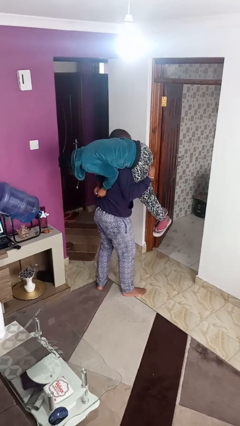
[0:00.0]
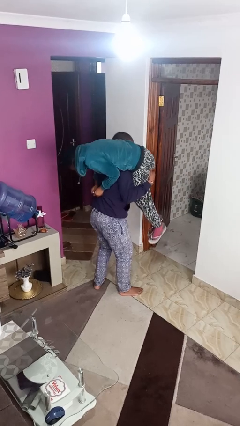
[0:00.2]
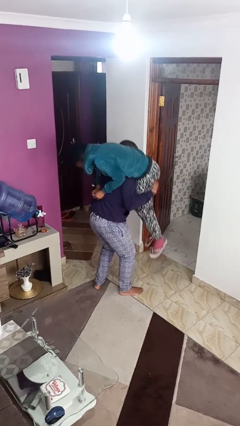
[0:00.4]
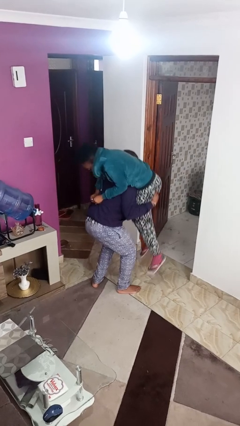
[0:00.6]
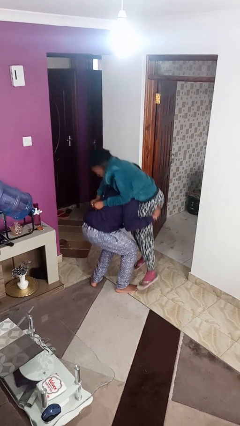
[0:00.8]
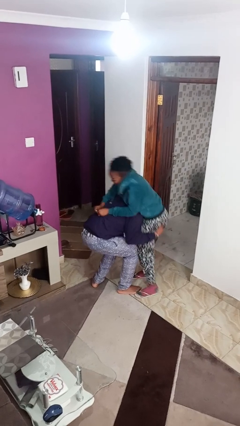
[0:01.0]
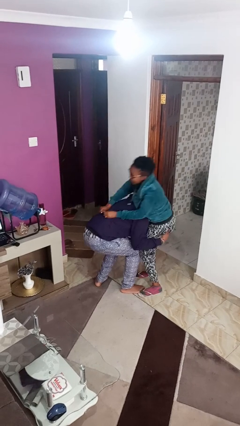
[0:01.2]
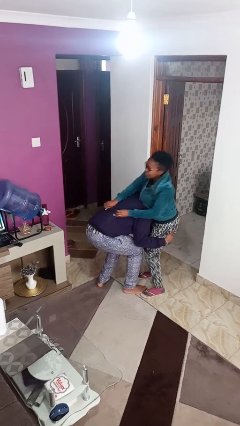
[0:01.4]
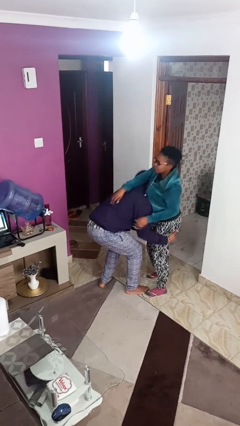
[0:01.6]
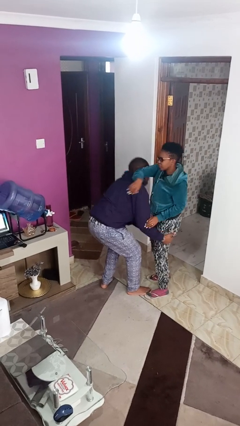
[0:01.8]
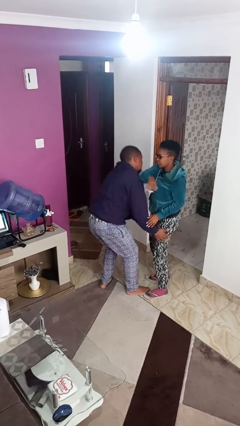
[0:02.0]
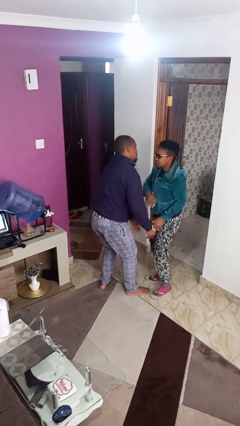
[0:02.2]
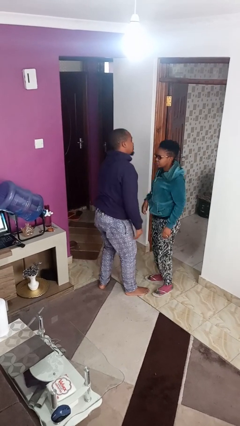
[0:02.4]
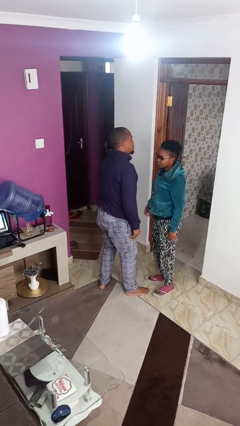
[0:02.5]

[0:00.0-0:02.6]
person puts down person

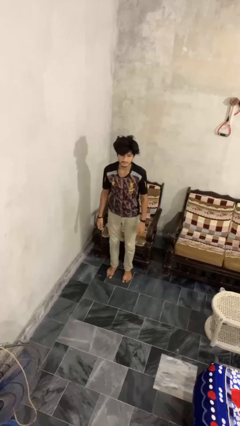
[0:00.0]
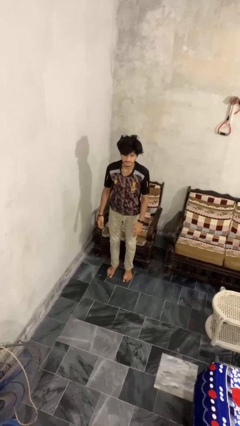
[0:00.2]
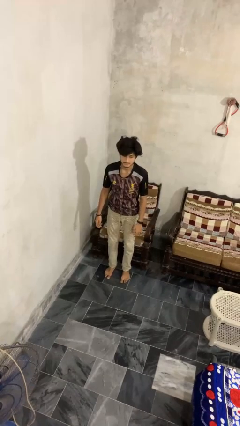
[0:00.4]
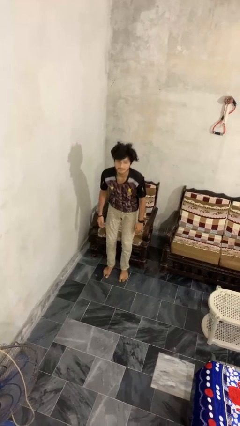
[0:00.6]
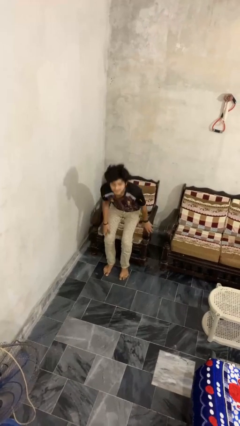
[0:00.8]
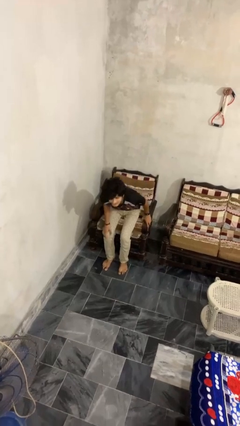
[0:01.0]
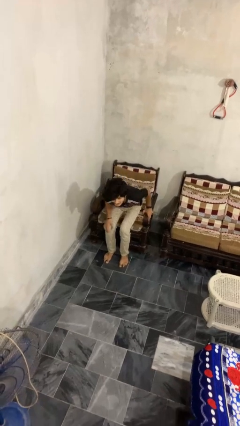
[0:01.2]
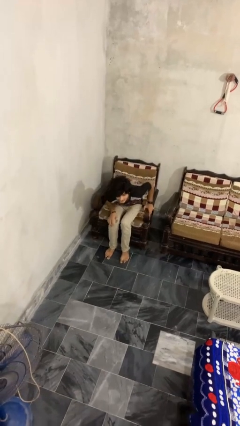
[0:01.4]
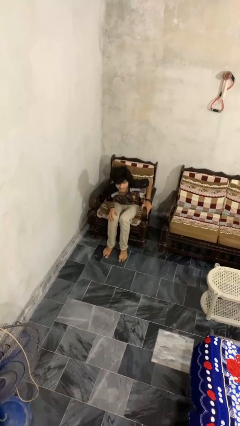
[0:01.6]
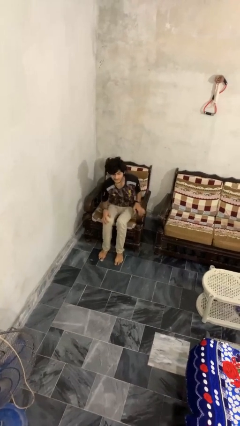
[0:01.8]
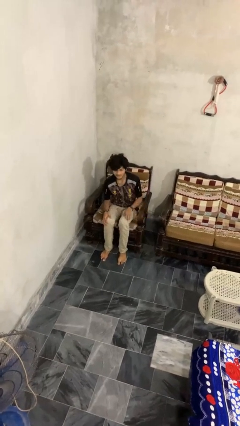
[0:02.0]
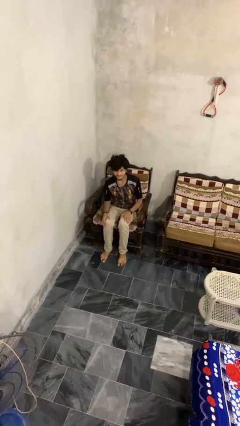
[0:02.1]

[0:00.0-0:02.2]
person sits down

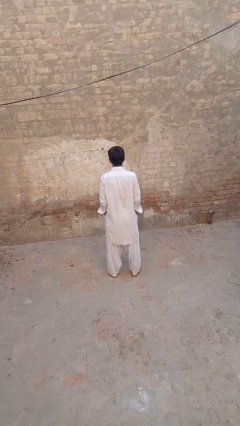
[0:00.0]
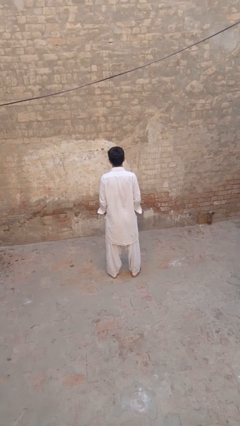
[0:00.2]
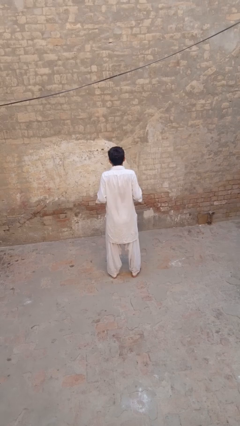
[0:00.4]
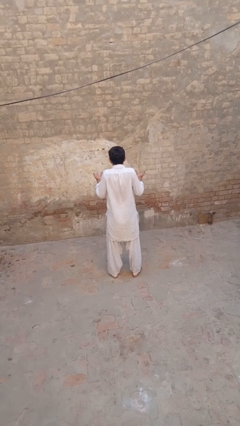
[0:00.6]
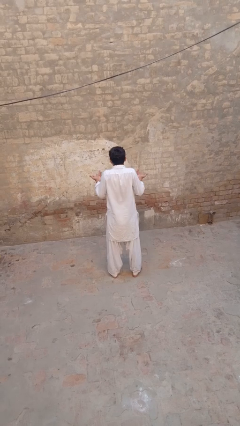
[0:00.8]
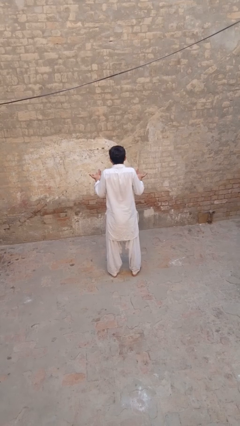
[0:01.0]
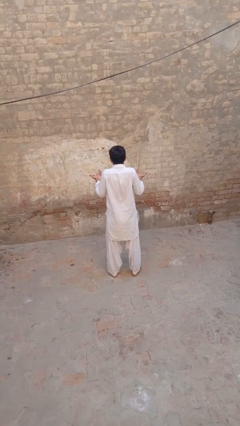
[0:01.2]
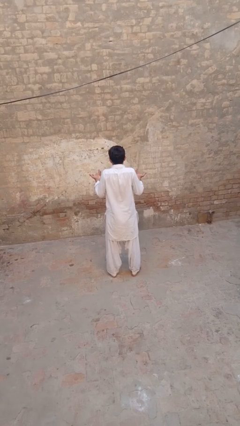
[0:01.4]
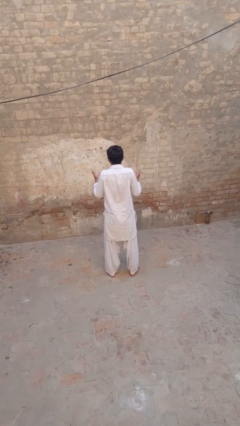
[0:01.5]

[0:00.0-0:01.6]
person shrugs

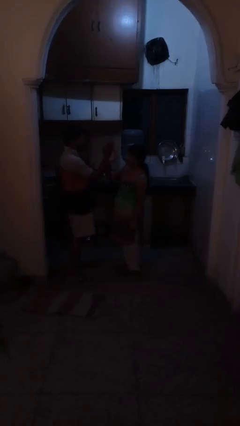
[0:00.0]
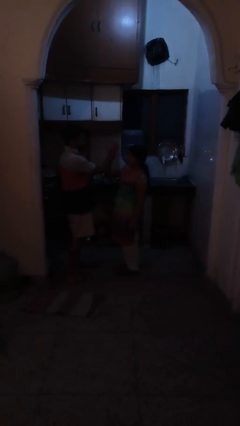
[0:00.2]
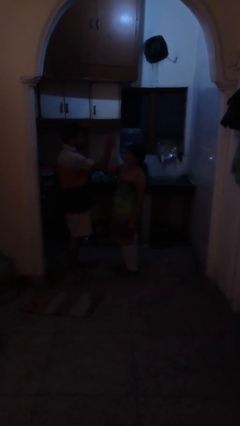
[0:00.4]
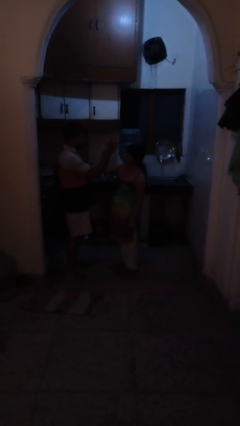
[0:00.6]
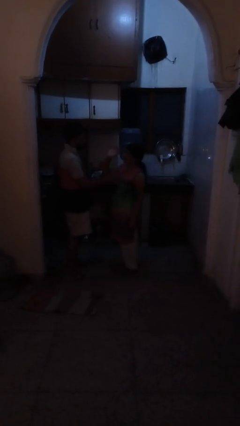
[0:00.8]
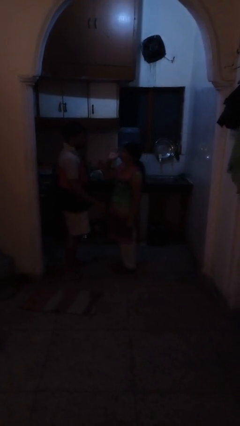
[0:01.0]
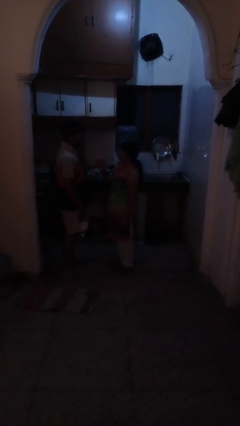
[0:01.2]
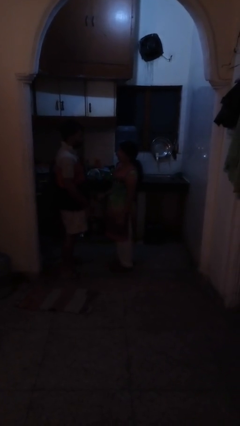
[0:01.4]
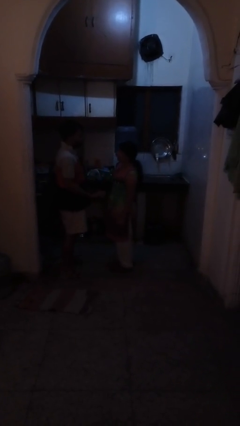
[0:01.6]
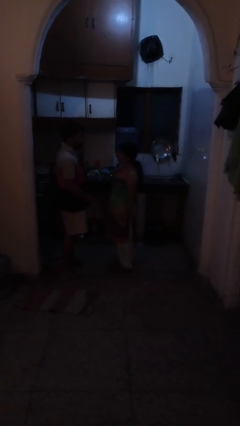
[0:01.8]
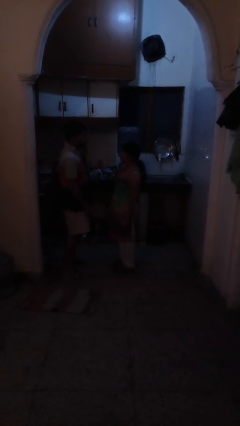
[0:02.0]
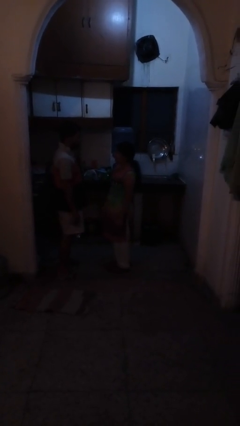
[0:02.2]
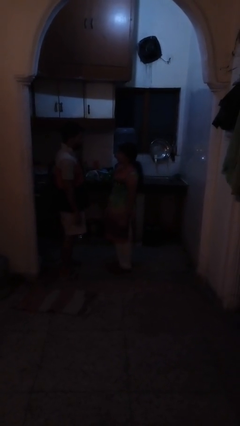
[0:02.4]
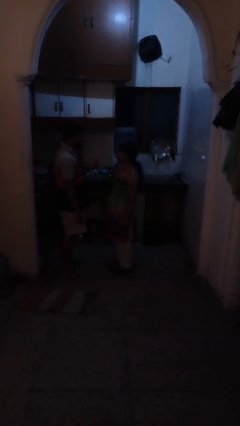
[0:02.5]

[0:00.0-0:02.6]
person highfives hand

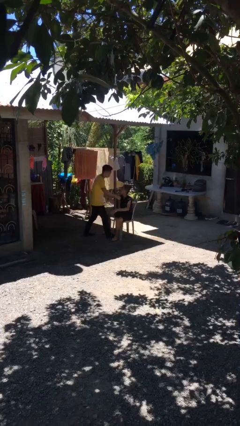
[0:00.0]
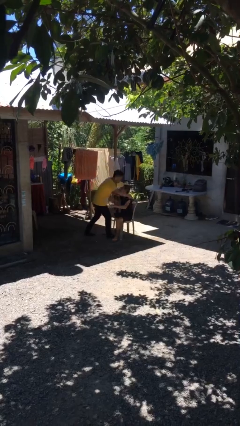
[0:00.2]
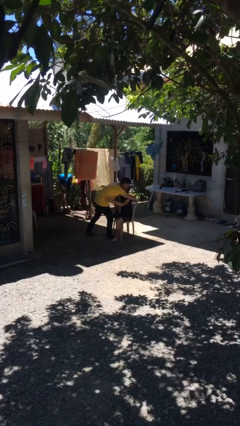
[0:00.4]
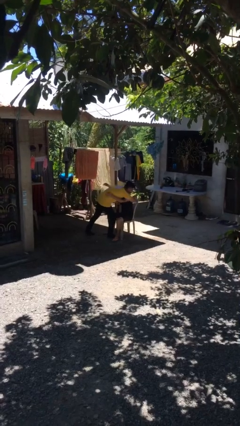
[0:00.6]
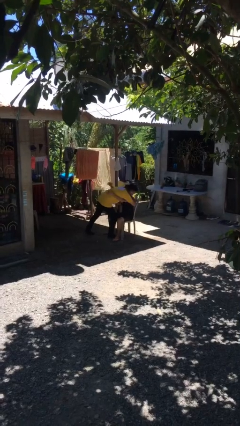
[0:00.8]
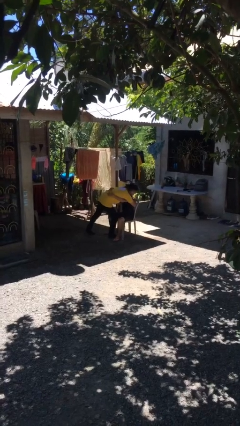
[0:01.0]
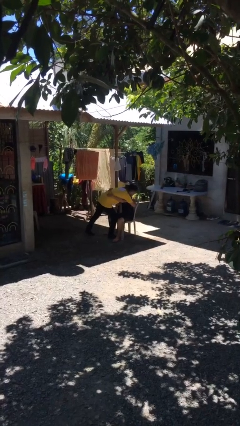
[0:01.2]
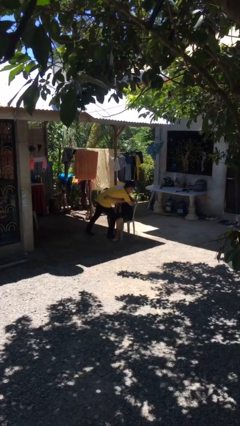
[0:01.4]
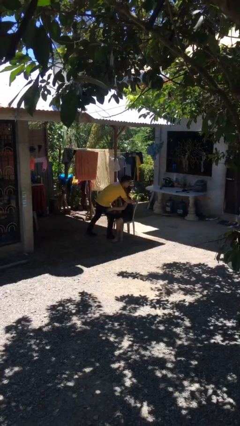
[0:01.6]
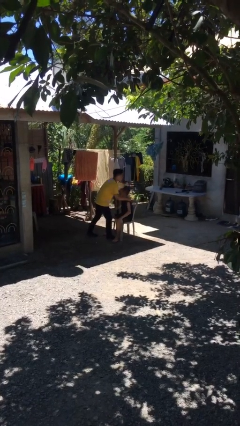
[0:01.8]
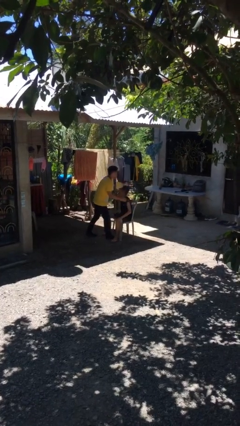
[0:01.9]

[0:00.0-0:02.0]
person embraces person

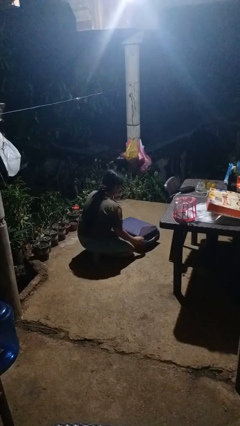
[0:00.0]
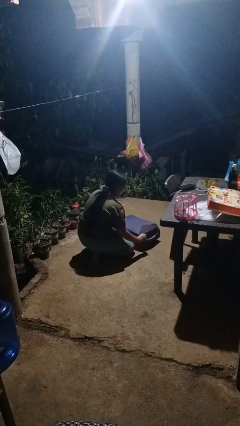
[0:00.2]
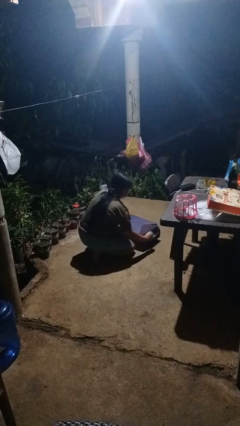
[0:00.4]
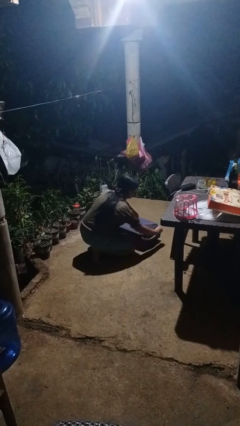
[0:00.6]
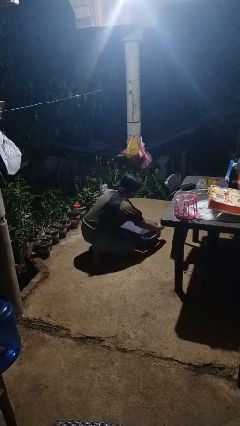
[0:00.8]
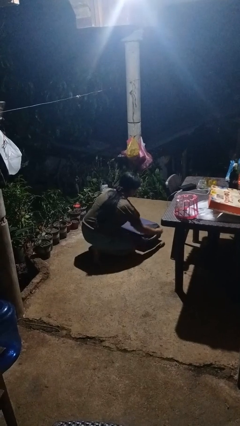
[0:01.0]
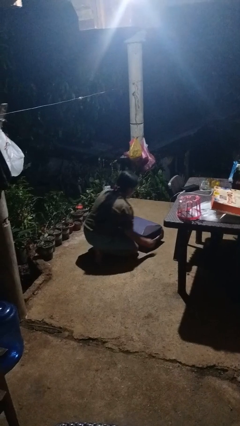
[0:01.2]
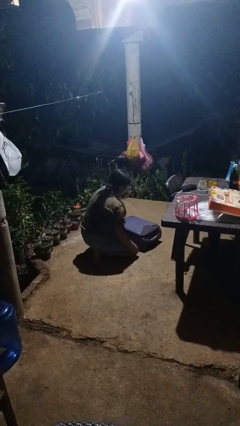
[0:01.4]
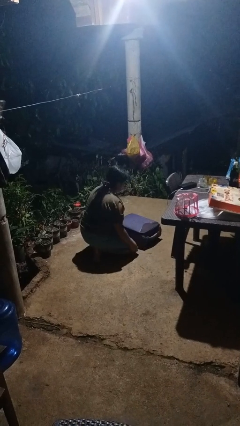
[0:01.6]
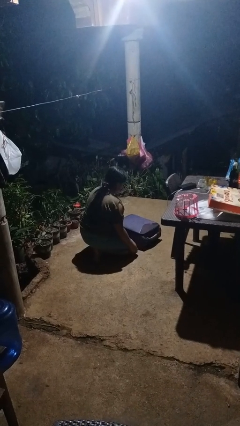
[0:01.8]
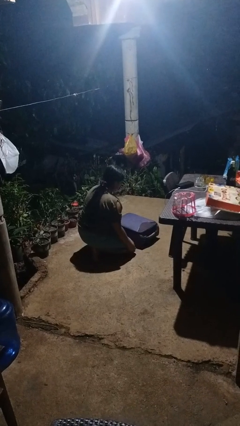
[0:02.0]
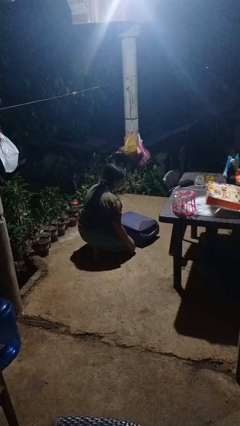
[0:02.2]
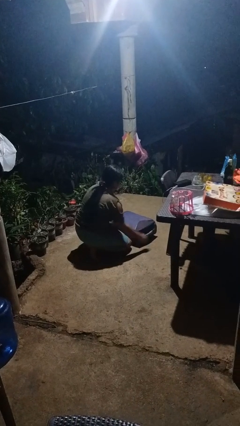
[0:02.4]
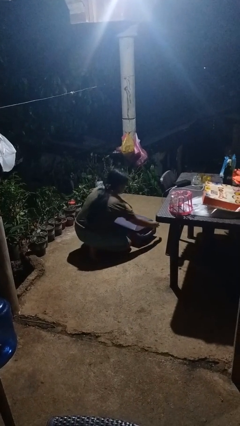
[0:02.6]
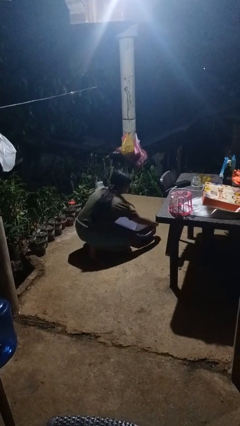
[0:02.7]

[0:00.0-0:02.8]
person opens suitcase

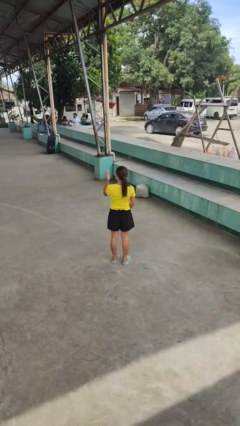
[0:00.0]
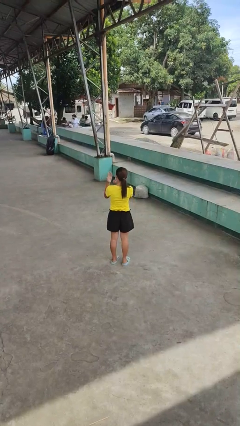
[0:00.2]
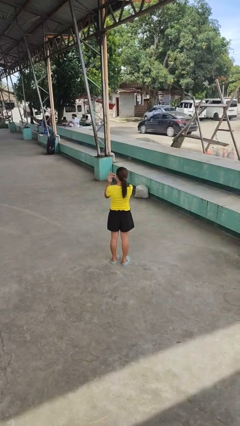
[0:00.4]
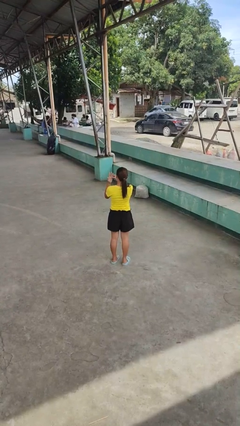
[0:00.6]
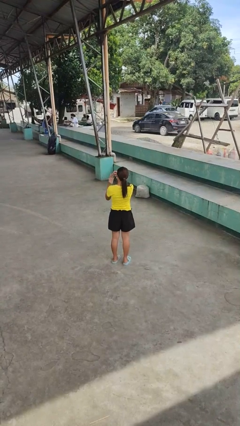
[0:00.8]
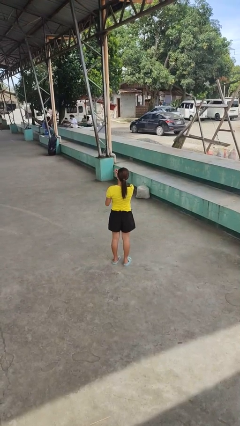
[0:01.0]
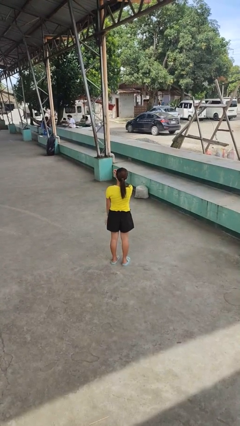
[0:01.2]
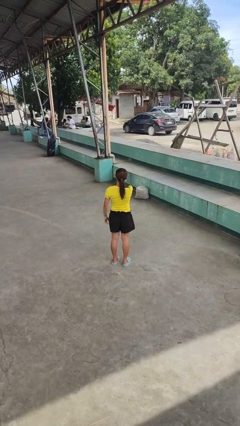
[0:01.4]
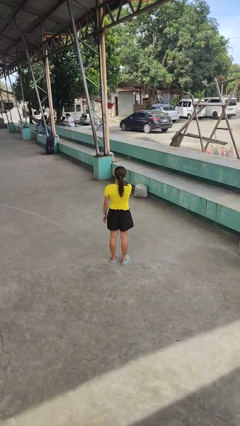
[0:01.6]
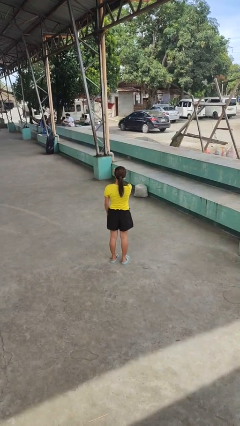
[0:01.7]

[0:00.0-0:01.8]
person takes off ring

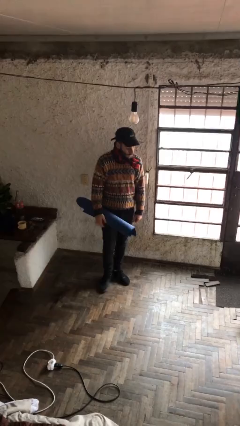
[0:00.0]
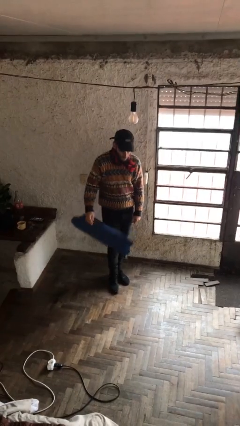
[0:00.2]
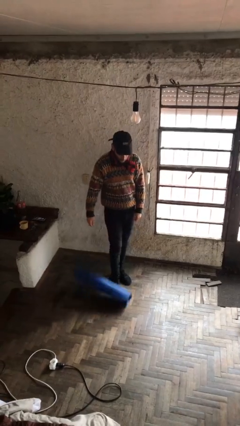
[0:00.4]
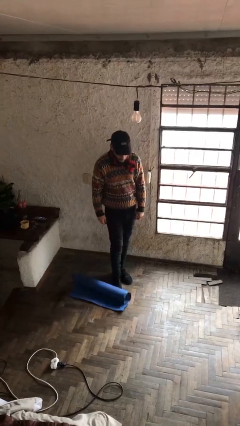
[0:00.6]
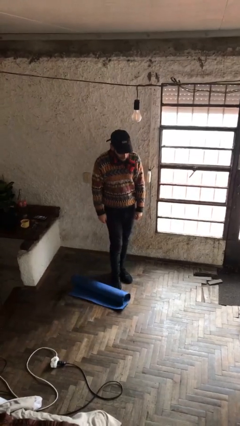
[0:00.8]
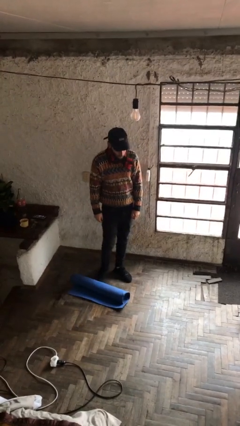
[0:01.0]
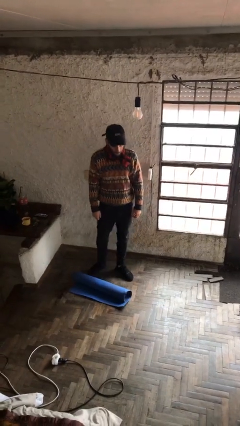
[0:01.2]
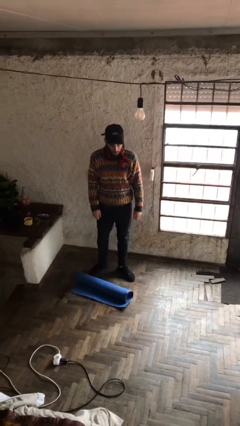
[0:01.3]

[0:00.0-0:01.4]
person drops object
